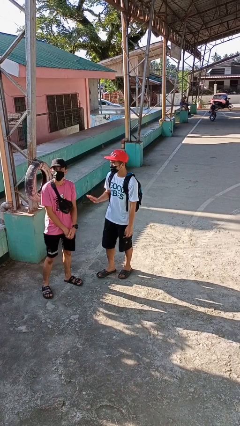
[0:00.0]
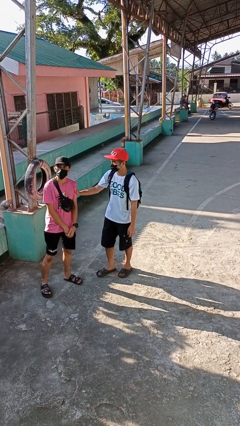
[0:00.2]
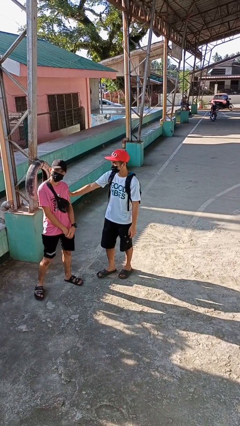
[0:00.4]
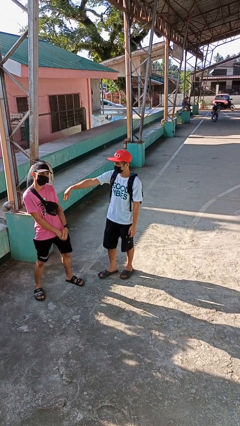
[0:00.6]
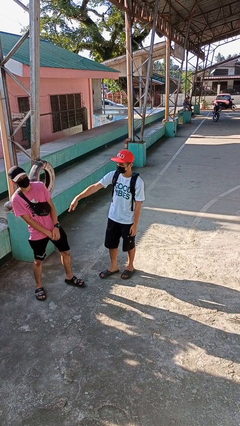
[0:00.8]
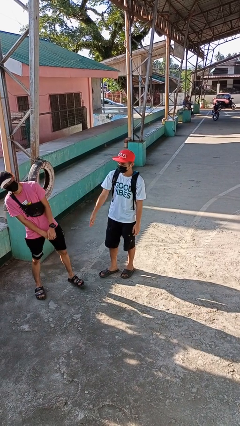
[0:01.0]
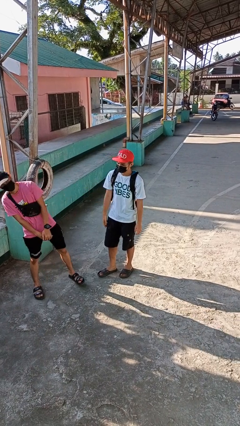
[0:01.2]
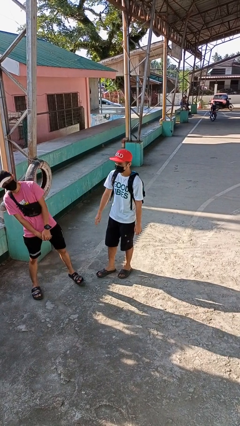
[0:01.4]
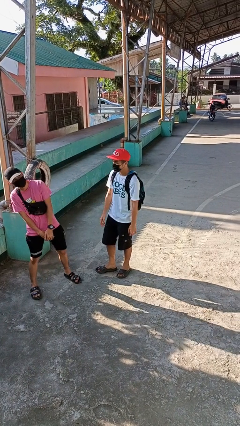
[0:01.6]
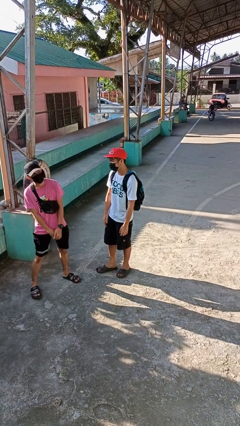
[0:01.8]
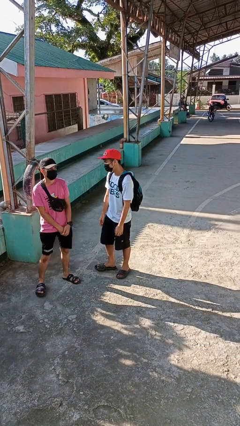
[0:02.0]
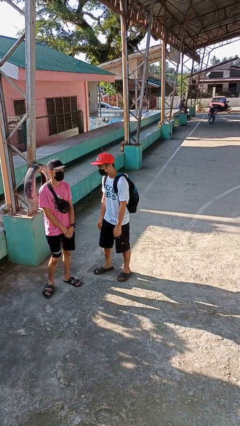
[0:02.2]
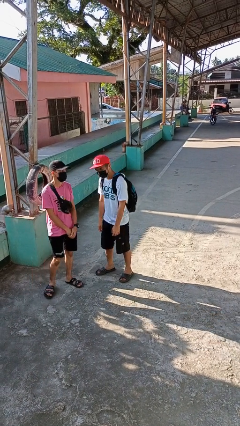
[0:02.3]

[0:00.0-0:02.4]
person shoves person

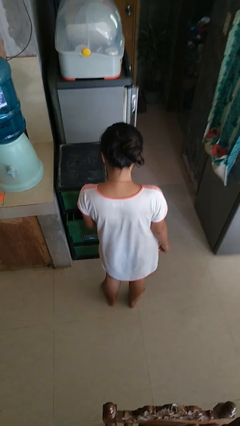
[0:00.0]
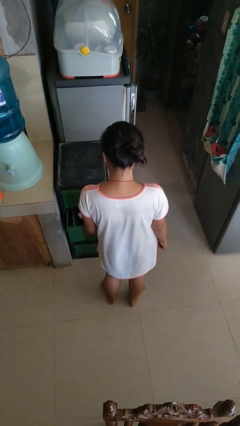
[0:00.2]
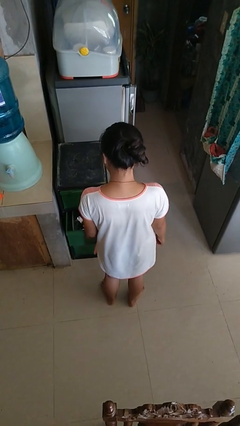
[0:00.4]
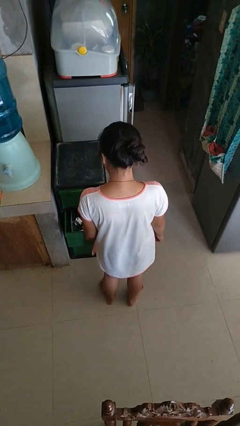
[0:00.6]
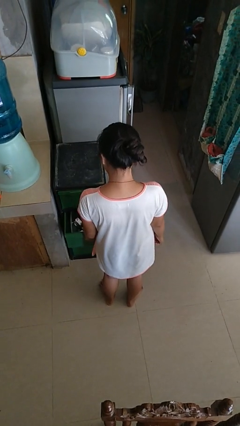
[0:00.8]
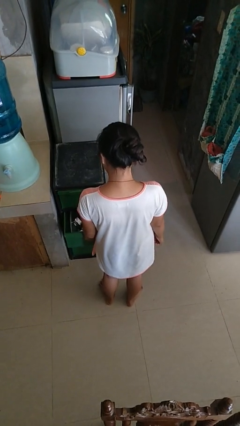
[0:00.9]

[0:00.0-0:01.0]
person opens kitchen drawer

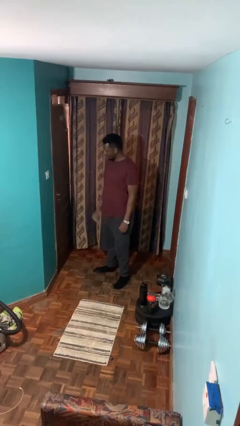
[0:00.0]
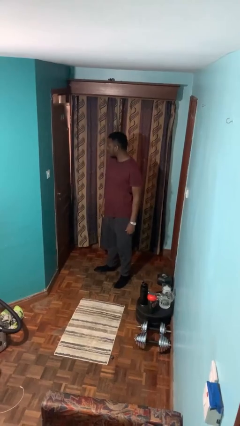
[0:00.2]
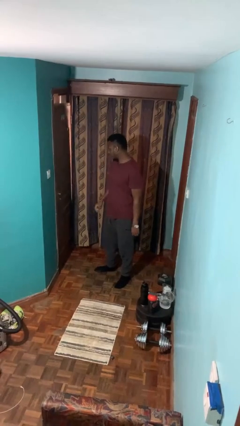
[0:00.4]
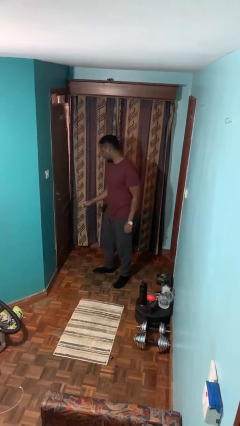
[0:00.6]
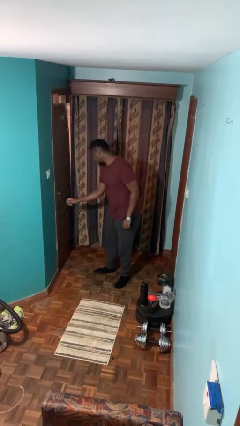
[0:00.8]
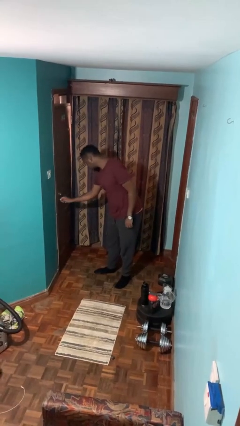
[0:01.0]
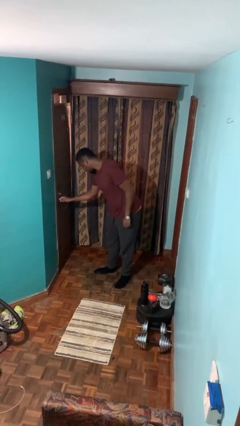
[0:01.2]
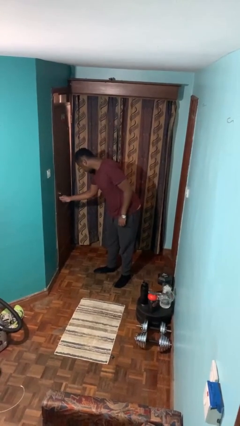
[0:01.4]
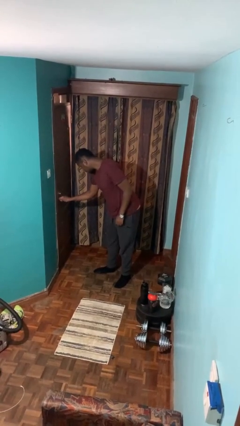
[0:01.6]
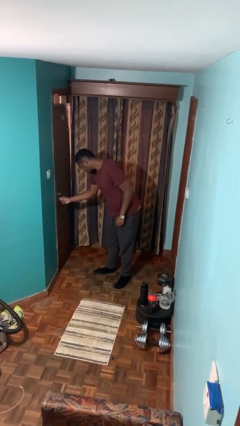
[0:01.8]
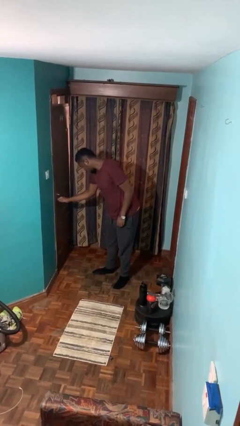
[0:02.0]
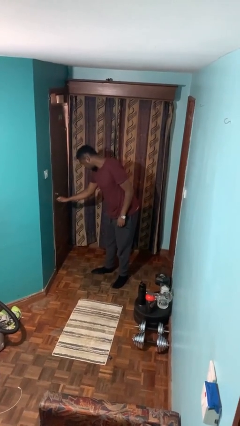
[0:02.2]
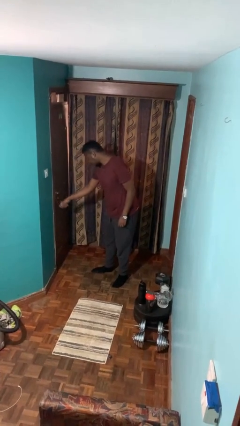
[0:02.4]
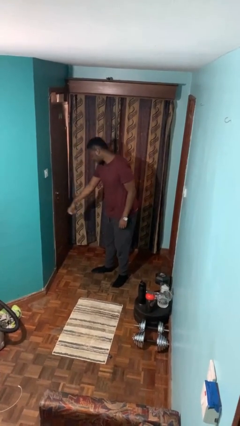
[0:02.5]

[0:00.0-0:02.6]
person locks door with keys

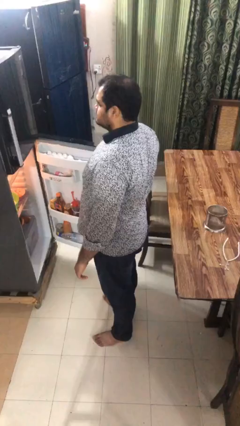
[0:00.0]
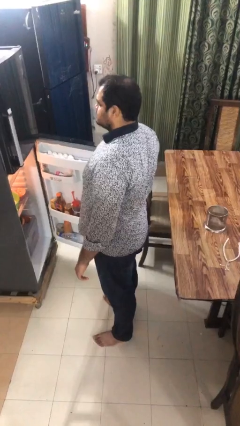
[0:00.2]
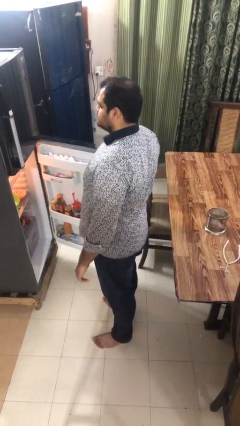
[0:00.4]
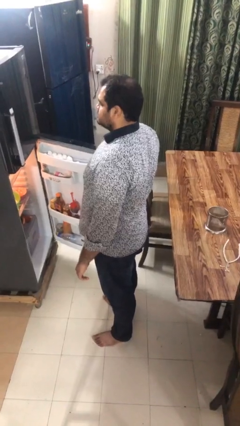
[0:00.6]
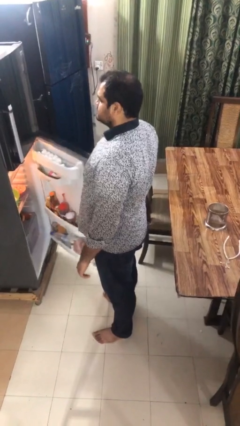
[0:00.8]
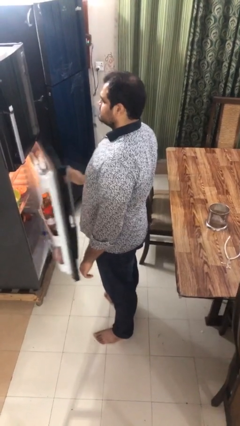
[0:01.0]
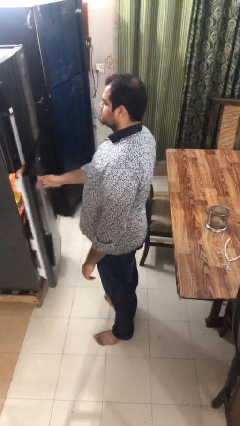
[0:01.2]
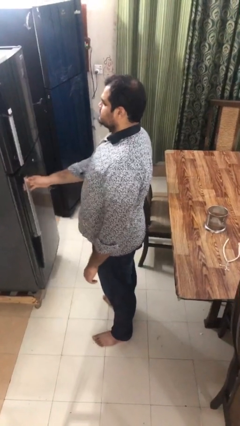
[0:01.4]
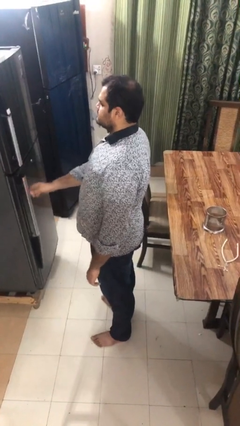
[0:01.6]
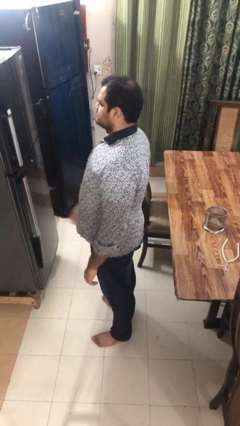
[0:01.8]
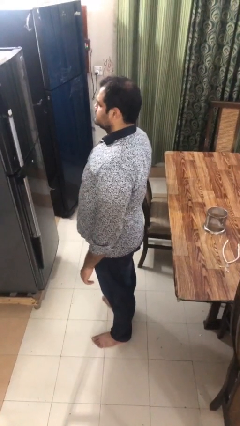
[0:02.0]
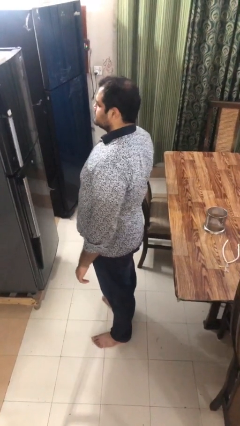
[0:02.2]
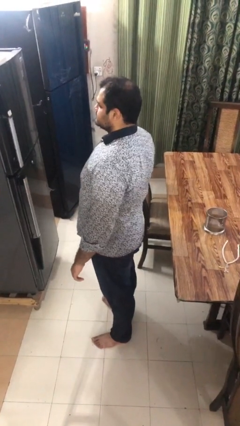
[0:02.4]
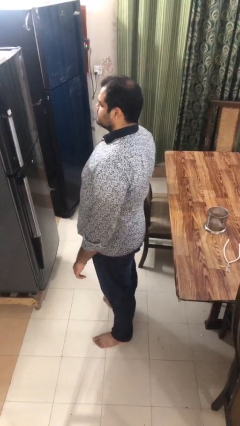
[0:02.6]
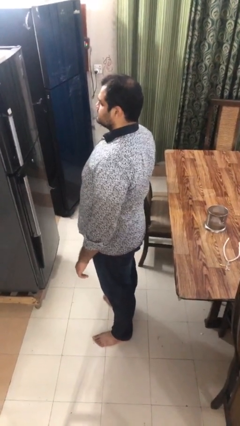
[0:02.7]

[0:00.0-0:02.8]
person closes refrigerator

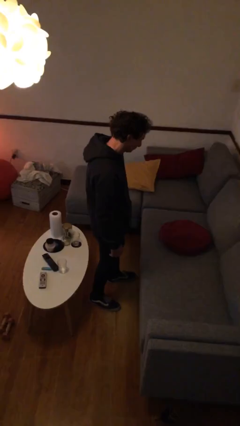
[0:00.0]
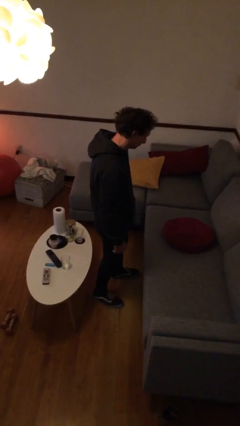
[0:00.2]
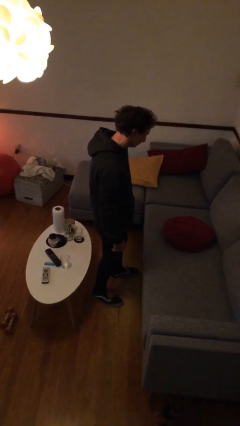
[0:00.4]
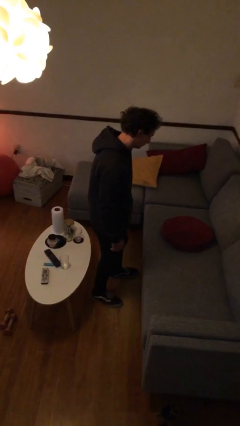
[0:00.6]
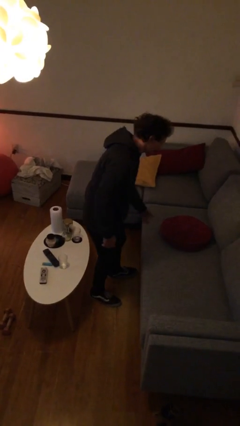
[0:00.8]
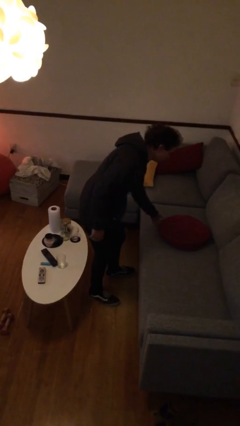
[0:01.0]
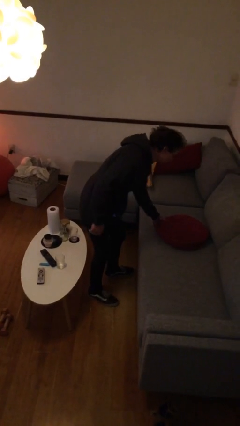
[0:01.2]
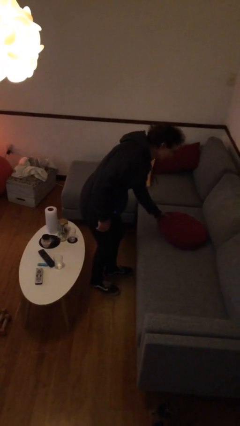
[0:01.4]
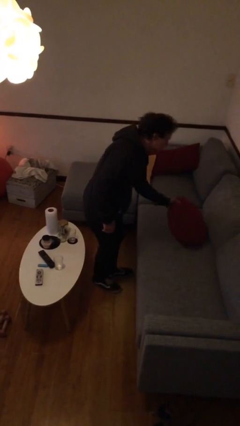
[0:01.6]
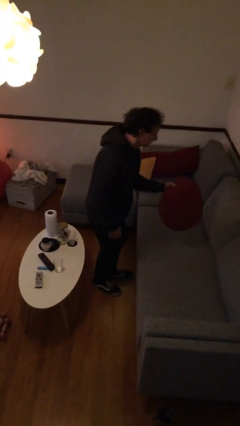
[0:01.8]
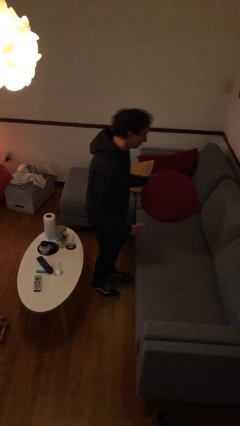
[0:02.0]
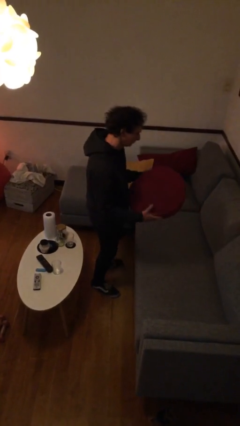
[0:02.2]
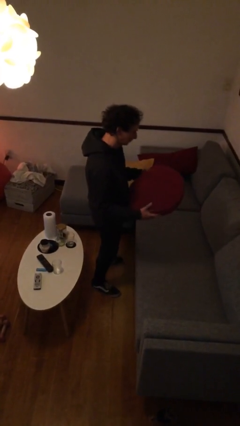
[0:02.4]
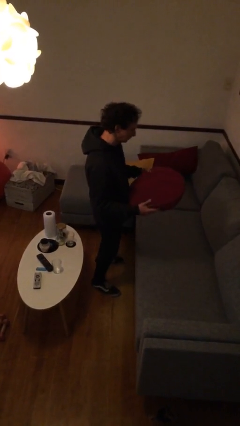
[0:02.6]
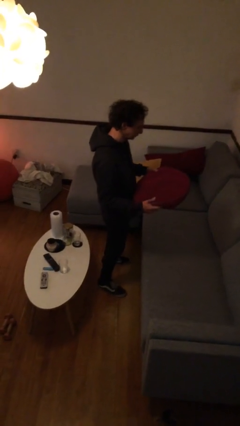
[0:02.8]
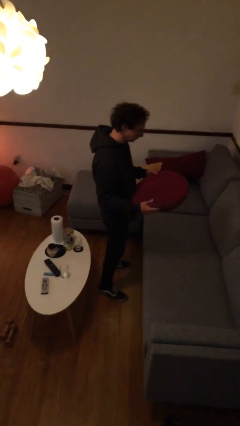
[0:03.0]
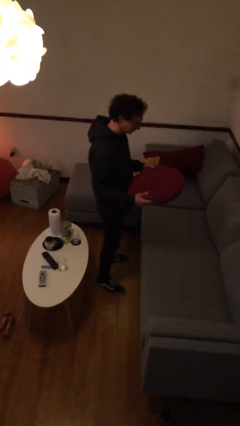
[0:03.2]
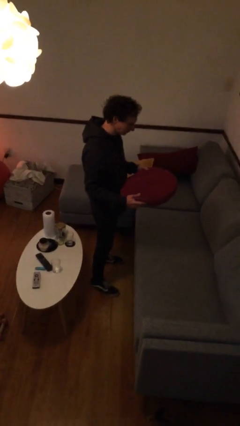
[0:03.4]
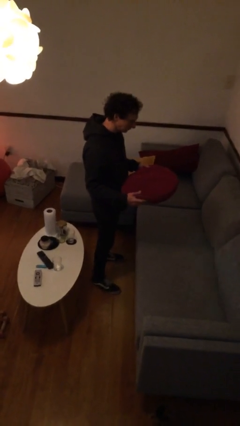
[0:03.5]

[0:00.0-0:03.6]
person picks up object from couch

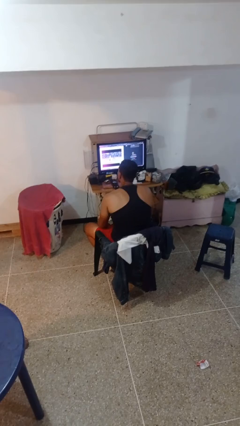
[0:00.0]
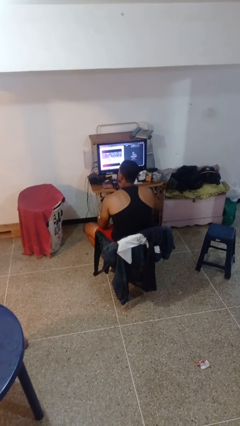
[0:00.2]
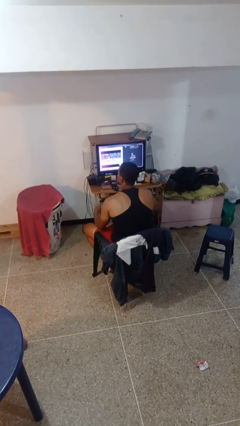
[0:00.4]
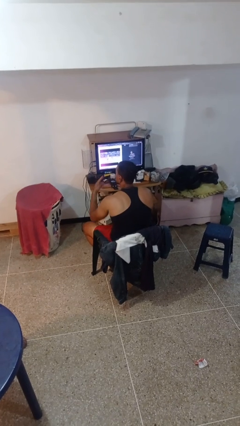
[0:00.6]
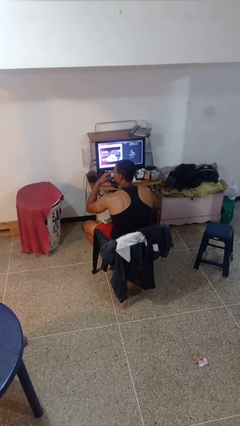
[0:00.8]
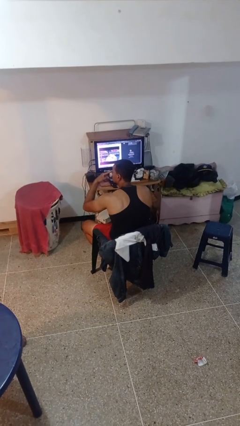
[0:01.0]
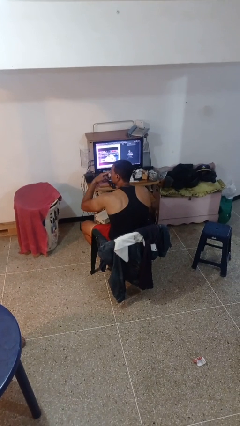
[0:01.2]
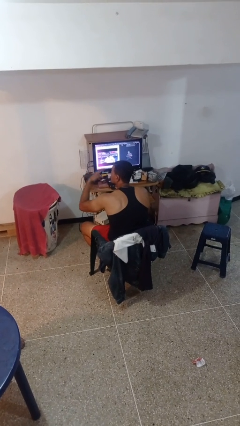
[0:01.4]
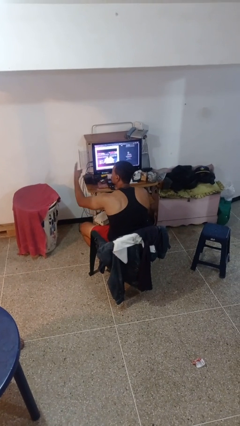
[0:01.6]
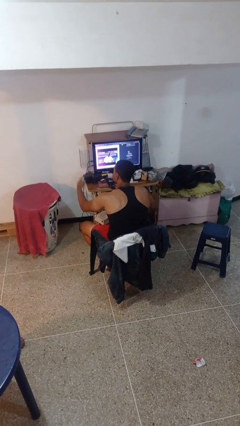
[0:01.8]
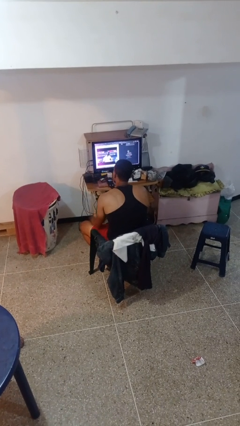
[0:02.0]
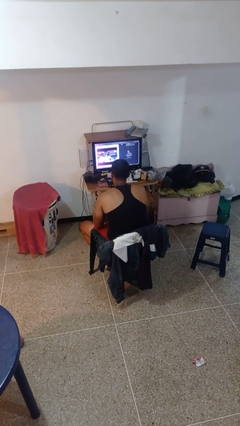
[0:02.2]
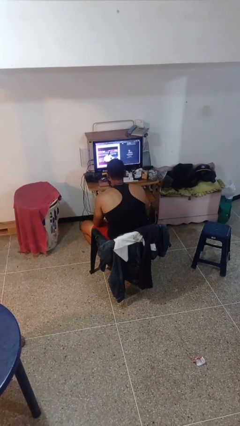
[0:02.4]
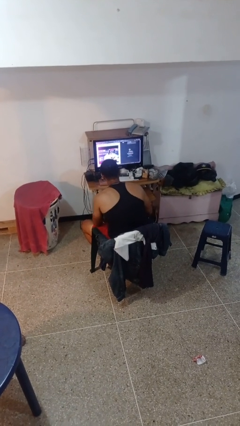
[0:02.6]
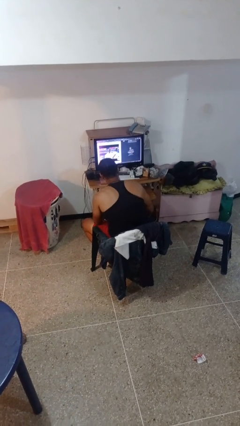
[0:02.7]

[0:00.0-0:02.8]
person gestures watch closely

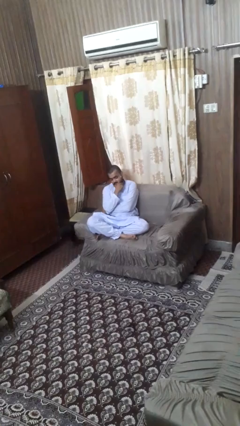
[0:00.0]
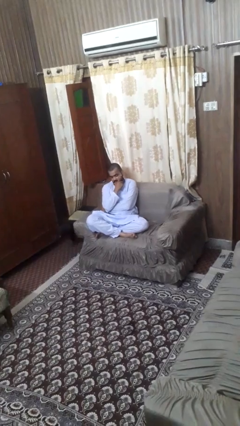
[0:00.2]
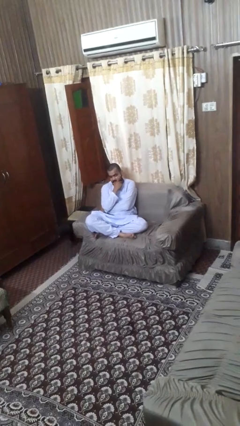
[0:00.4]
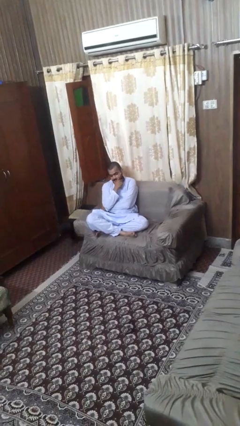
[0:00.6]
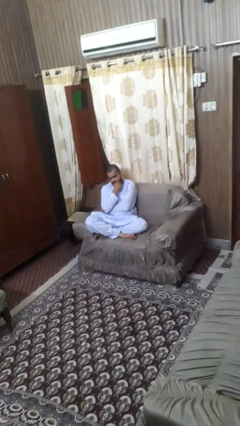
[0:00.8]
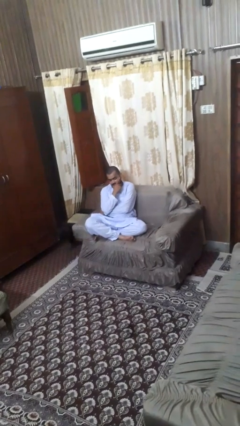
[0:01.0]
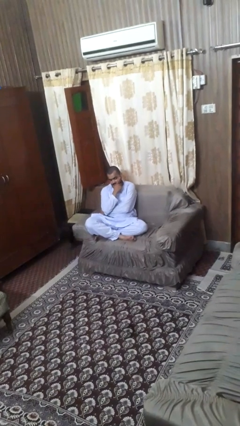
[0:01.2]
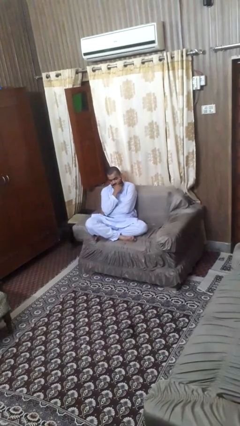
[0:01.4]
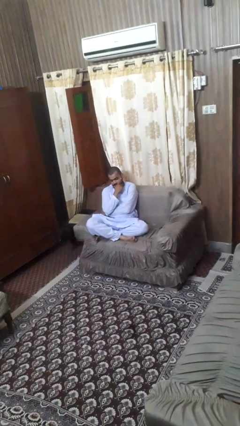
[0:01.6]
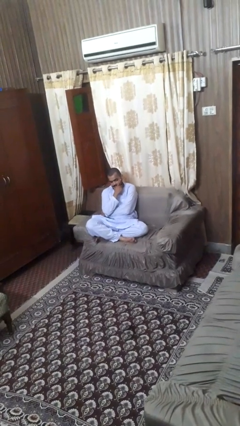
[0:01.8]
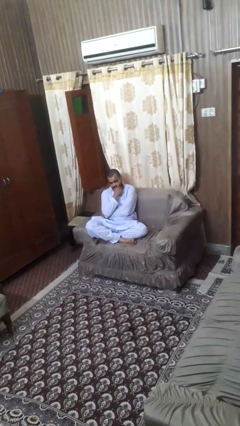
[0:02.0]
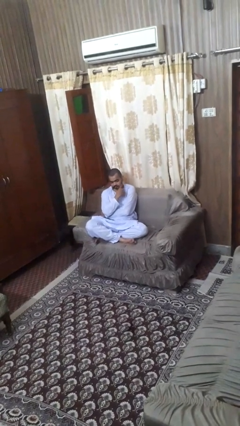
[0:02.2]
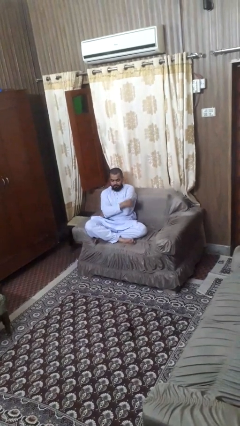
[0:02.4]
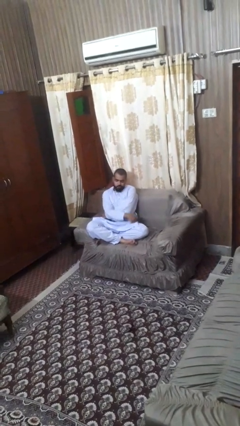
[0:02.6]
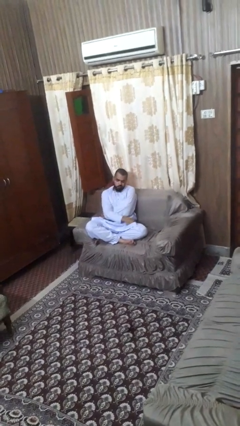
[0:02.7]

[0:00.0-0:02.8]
person strokes chin
